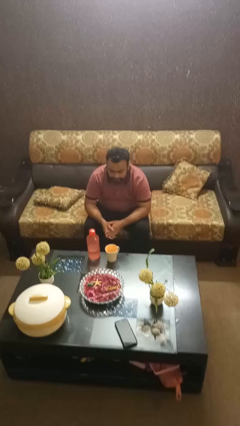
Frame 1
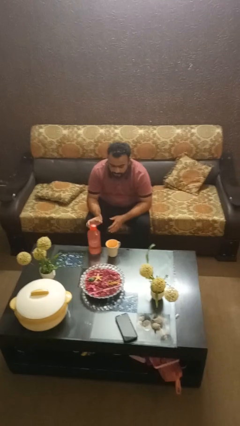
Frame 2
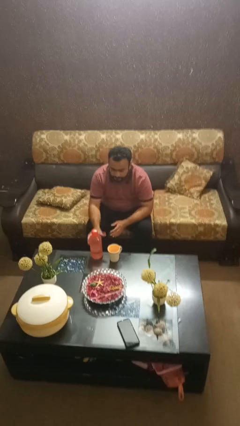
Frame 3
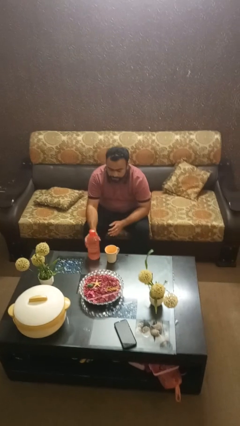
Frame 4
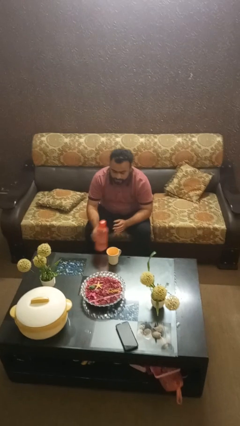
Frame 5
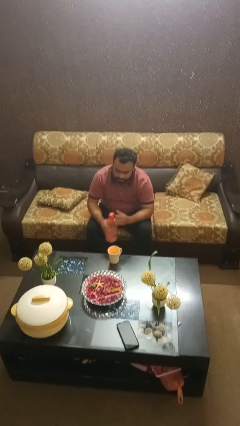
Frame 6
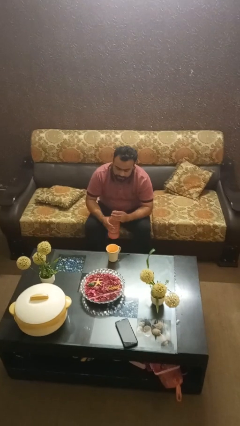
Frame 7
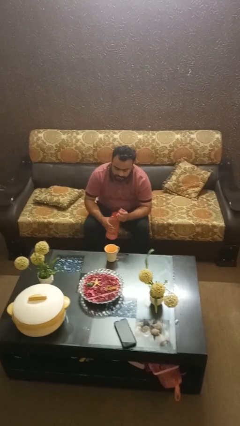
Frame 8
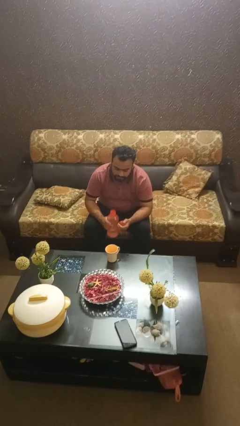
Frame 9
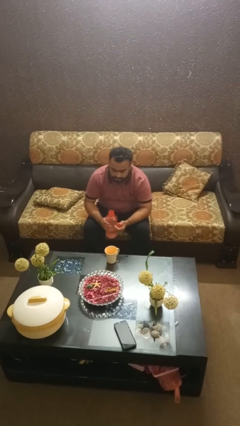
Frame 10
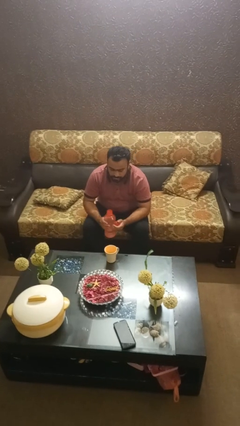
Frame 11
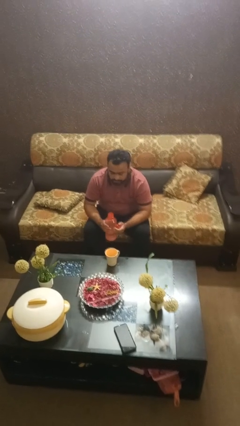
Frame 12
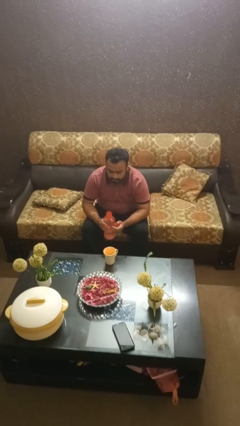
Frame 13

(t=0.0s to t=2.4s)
person unscrews lid from bottle

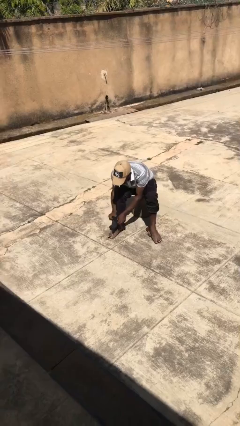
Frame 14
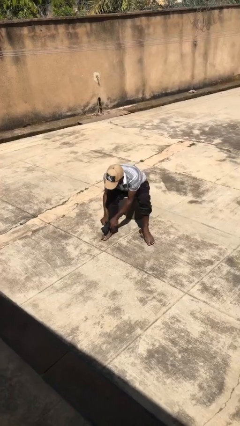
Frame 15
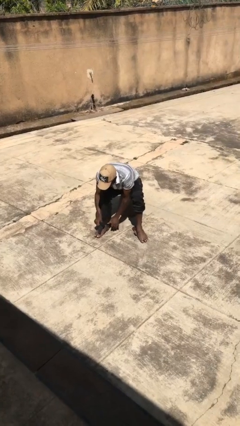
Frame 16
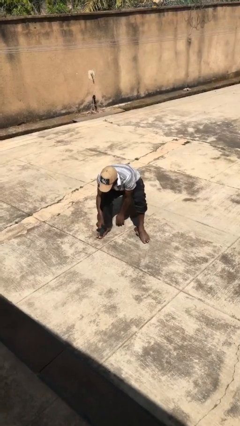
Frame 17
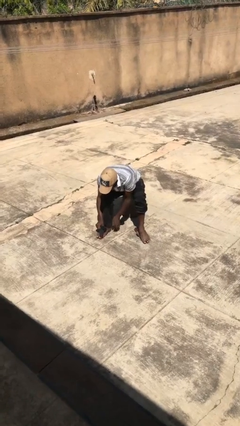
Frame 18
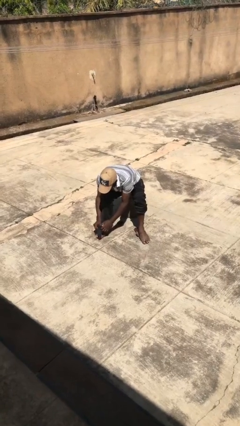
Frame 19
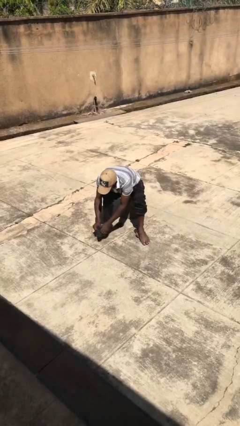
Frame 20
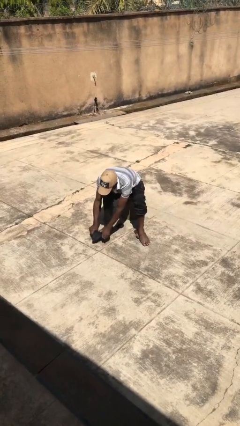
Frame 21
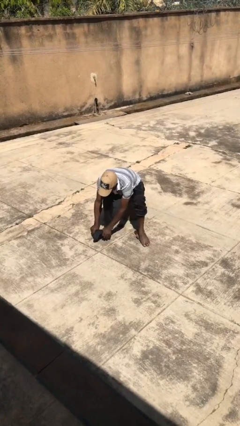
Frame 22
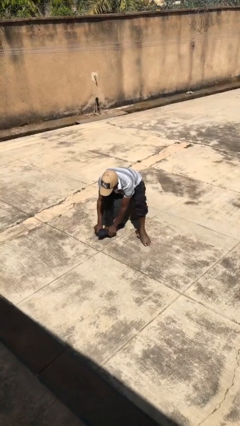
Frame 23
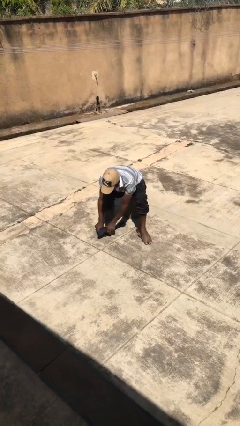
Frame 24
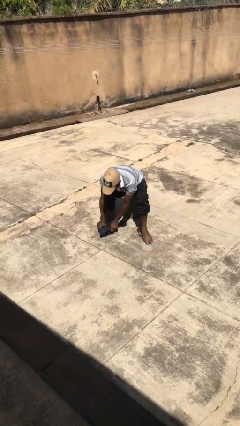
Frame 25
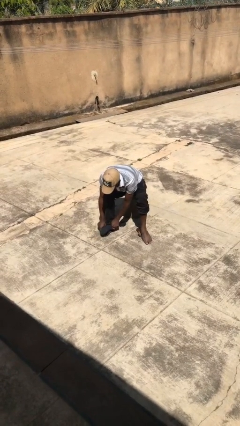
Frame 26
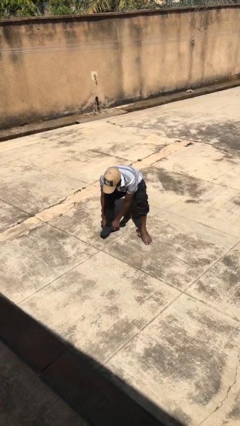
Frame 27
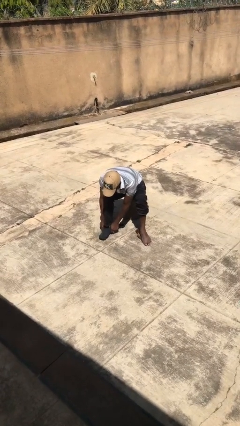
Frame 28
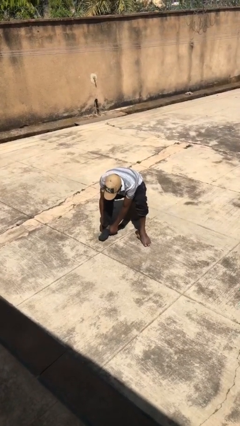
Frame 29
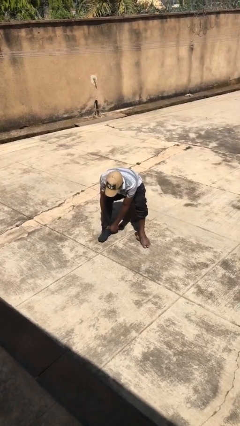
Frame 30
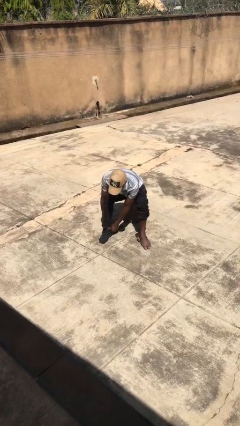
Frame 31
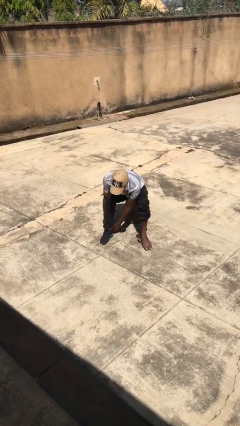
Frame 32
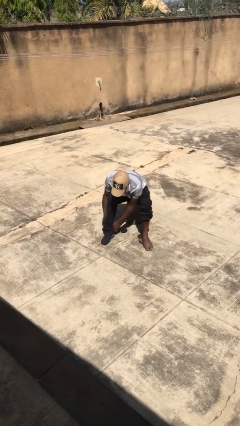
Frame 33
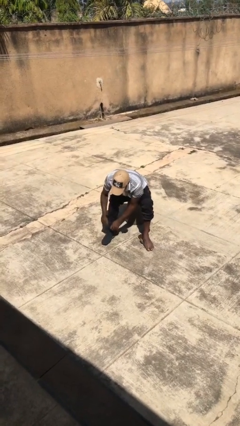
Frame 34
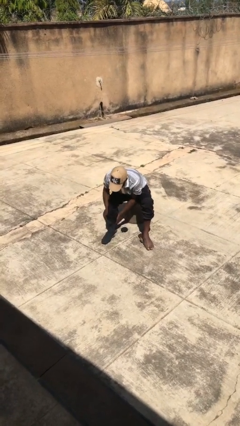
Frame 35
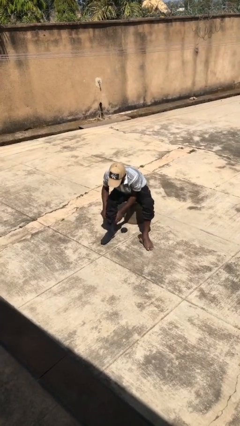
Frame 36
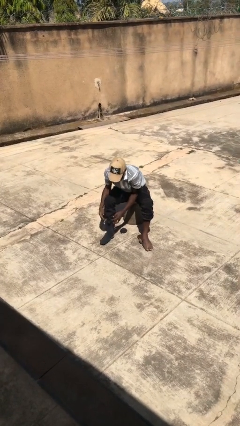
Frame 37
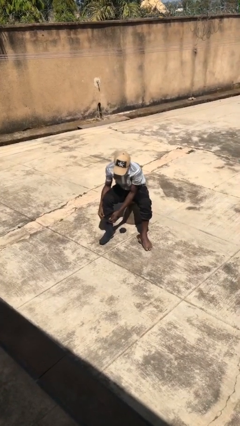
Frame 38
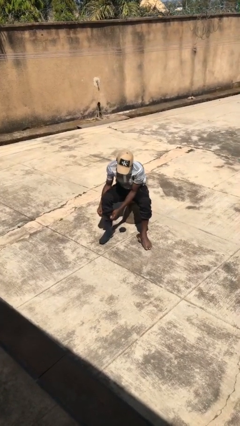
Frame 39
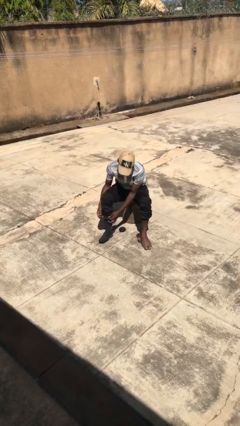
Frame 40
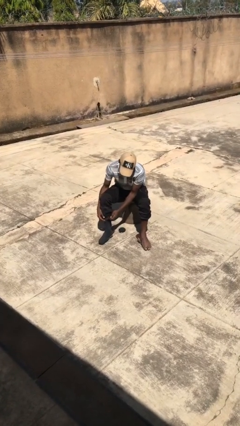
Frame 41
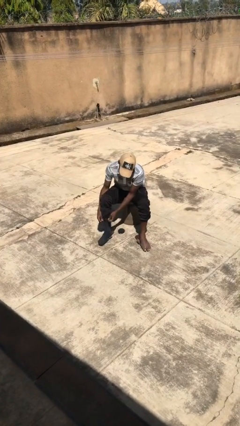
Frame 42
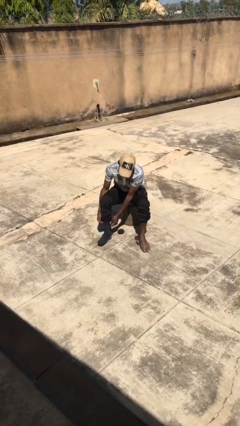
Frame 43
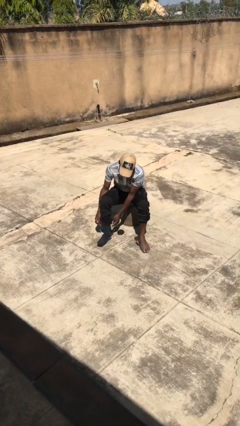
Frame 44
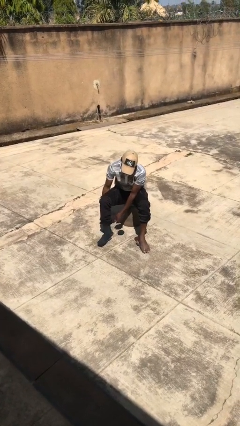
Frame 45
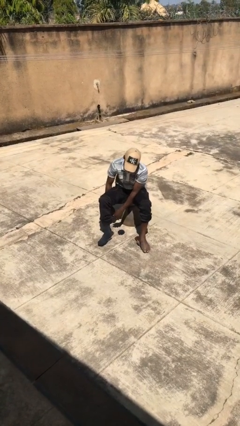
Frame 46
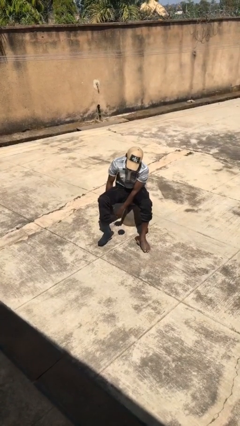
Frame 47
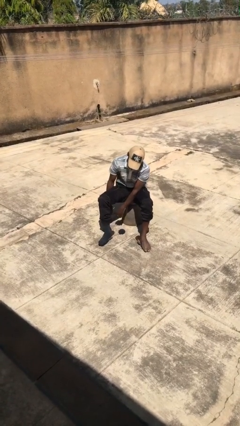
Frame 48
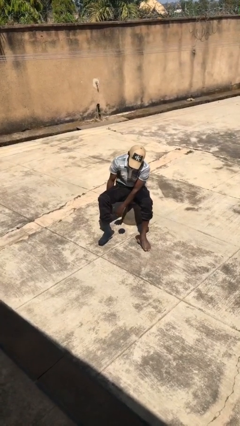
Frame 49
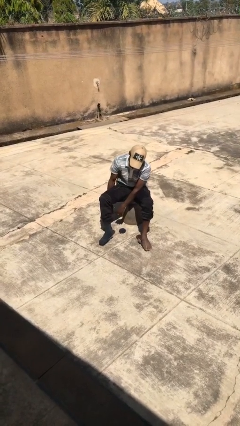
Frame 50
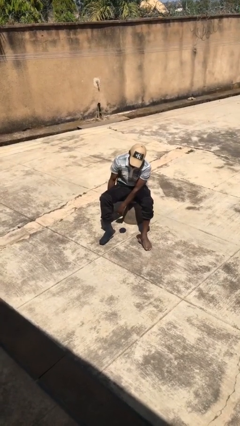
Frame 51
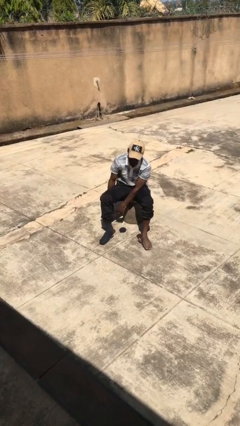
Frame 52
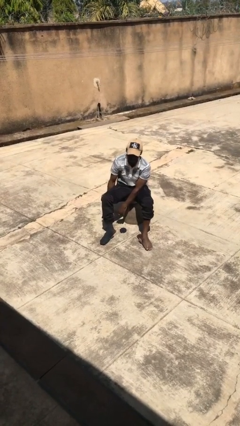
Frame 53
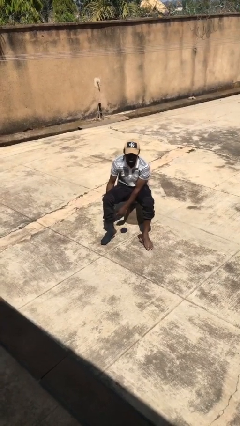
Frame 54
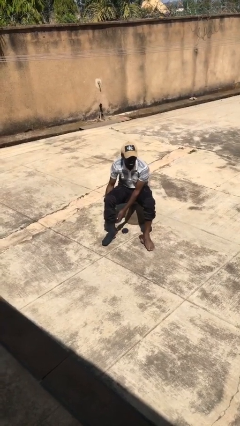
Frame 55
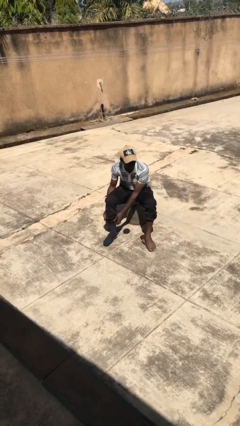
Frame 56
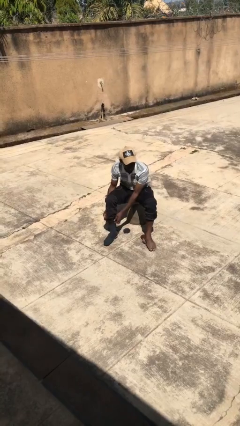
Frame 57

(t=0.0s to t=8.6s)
person puts on socks

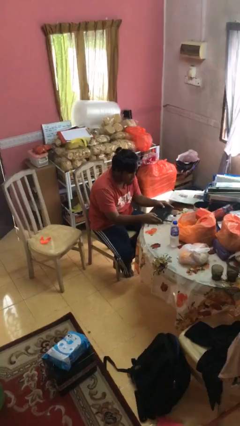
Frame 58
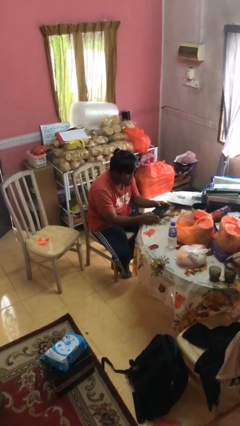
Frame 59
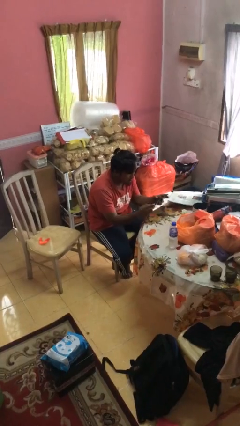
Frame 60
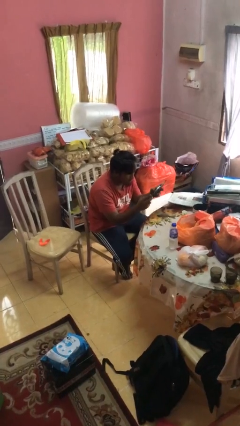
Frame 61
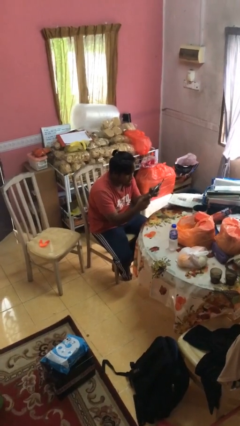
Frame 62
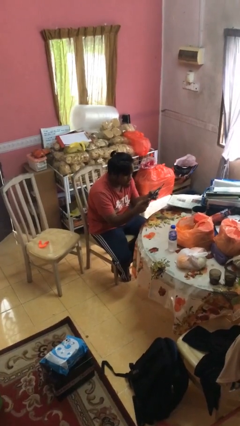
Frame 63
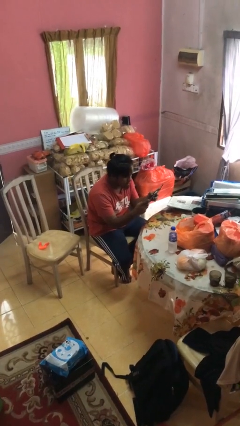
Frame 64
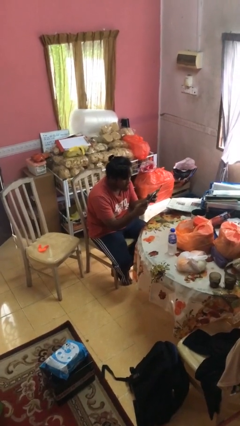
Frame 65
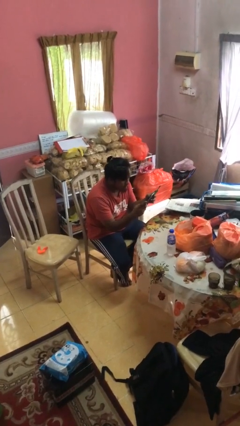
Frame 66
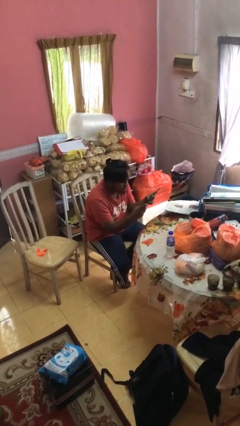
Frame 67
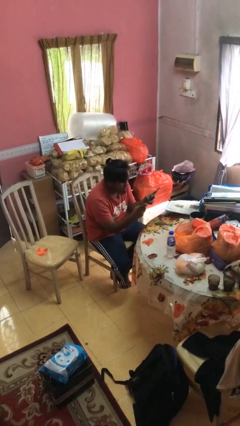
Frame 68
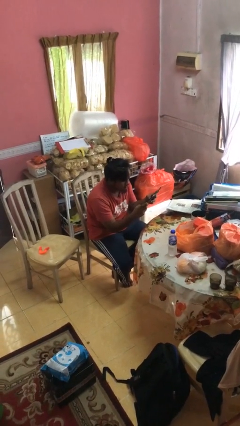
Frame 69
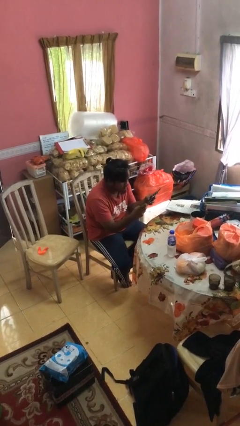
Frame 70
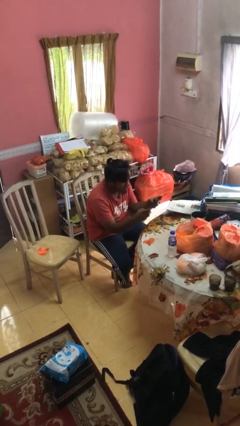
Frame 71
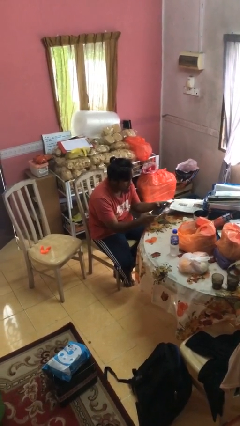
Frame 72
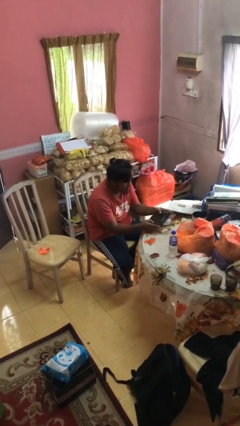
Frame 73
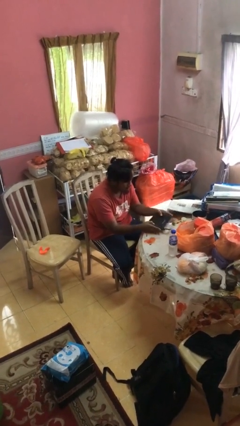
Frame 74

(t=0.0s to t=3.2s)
person interacts with handheld game

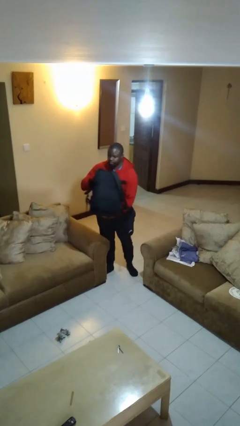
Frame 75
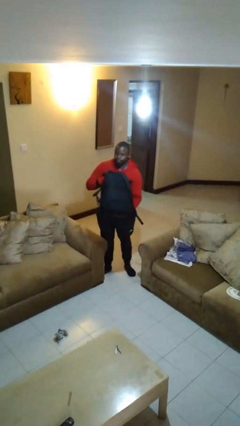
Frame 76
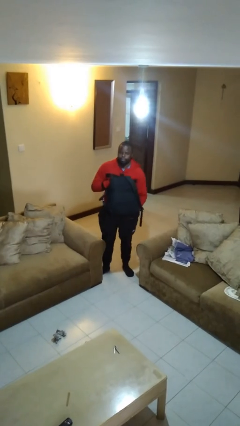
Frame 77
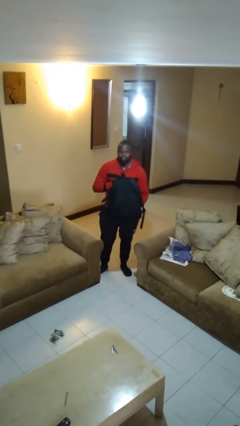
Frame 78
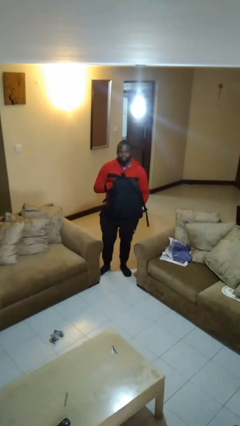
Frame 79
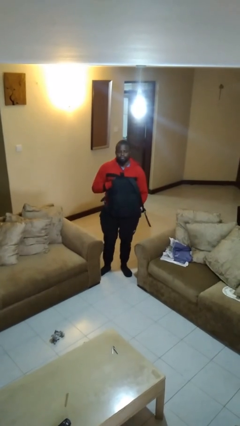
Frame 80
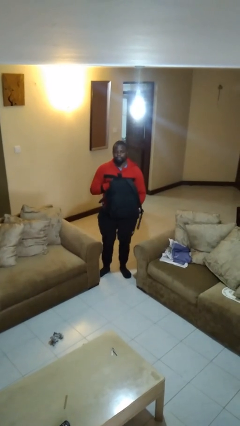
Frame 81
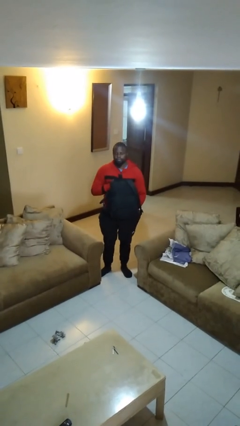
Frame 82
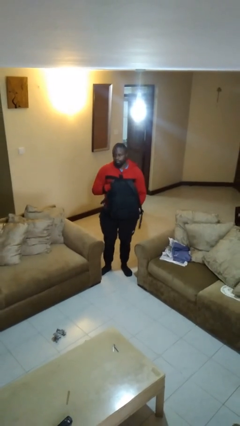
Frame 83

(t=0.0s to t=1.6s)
person picks up object from couch

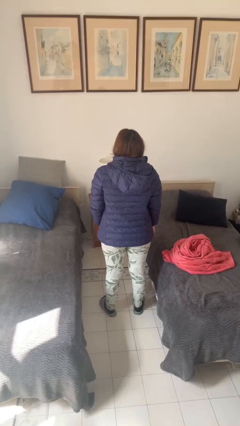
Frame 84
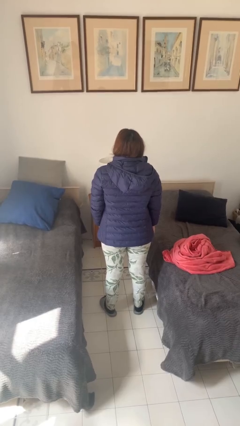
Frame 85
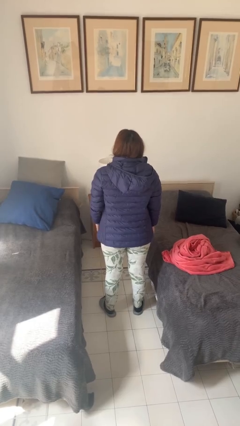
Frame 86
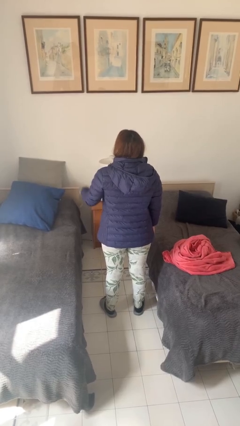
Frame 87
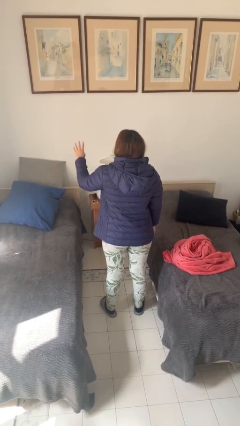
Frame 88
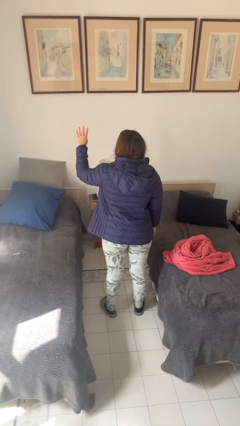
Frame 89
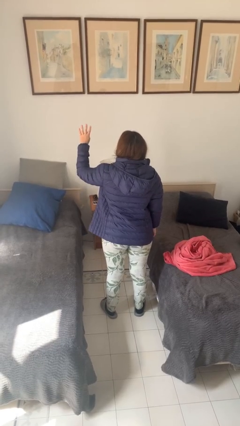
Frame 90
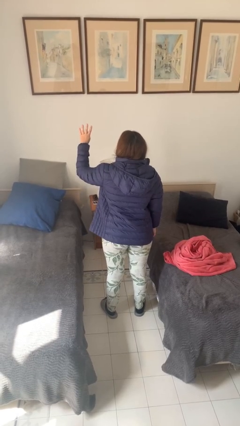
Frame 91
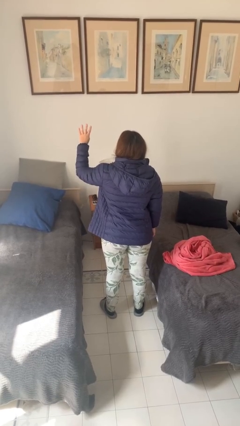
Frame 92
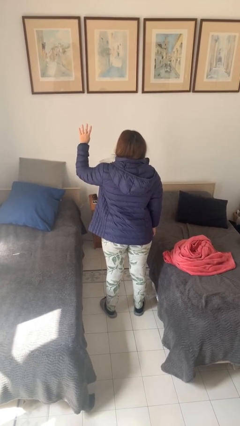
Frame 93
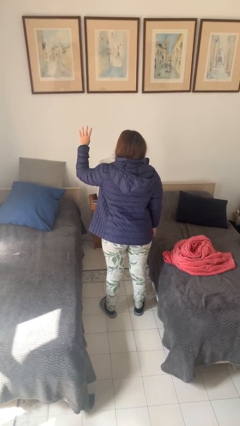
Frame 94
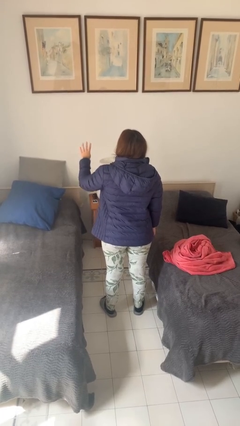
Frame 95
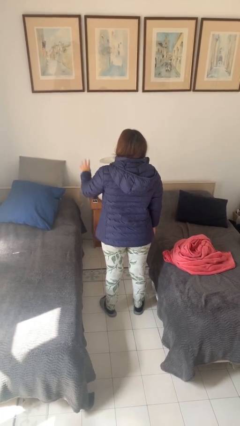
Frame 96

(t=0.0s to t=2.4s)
person gestures number four
